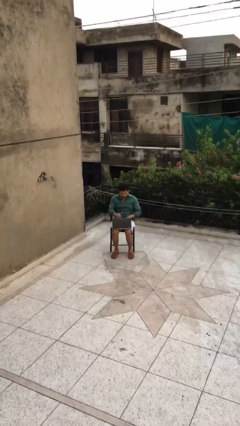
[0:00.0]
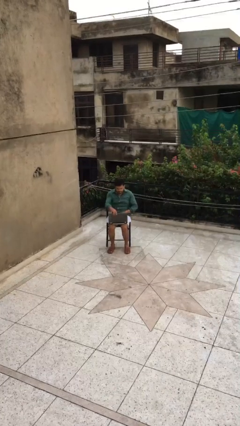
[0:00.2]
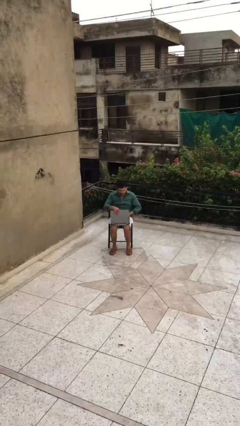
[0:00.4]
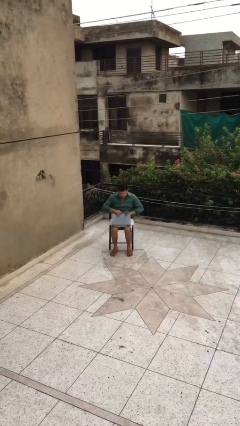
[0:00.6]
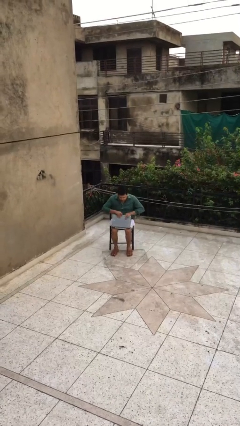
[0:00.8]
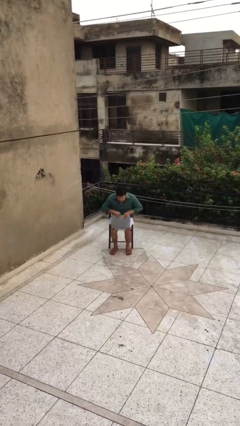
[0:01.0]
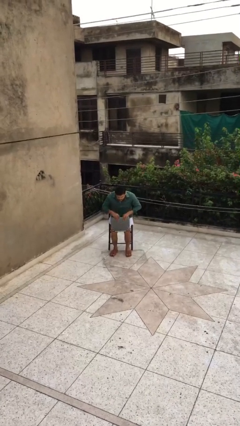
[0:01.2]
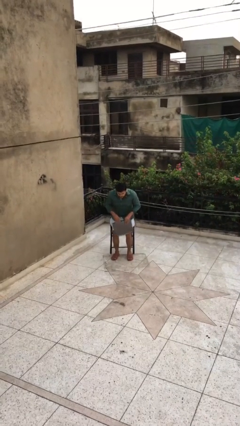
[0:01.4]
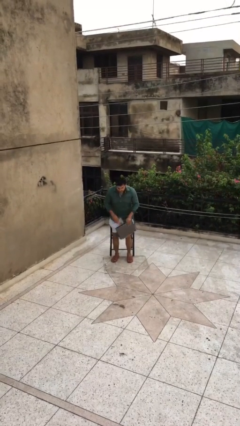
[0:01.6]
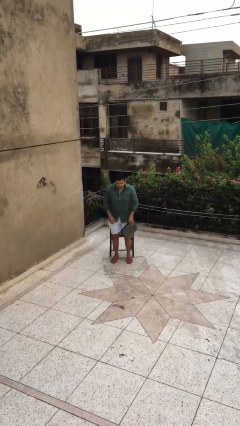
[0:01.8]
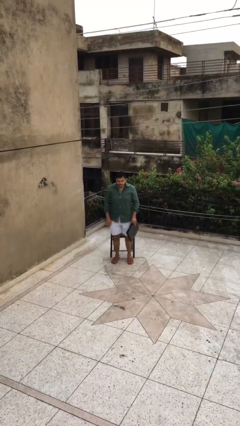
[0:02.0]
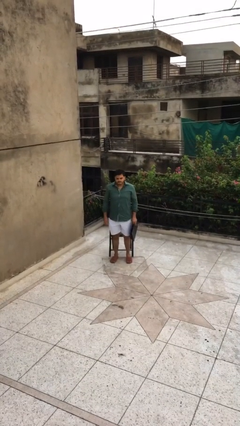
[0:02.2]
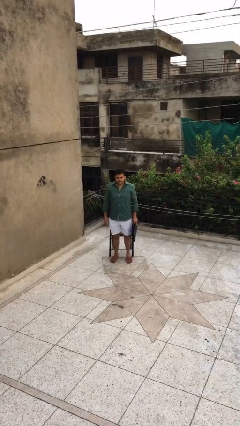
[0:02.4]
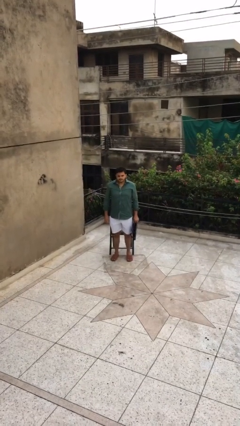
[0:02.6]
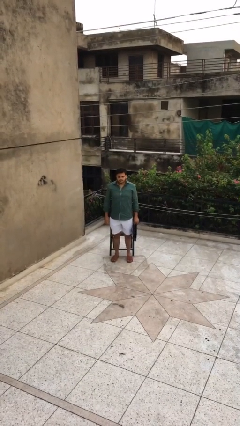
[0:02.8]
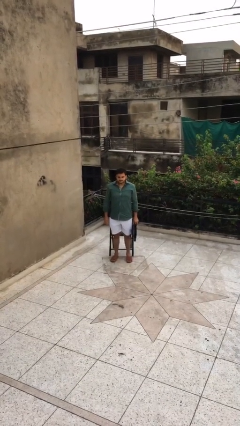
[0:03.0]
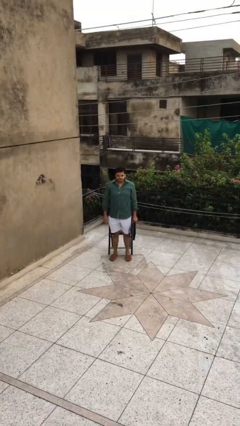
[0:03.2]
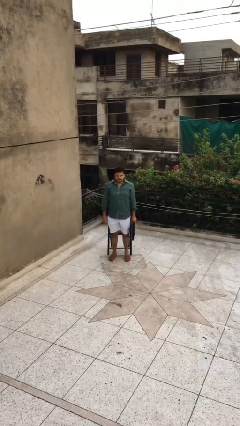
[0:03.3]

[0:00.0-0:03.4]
person stands up

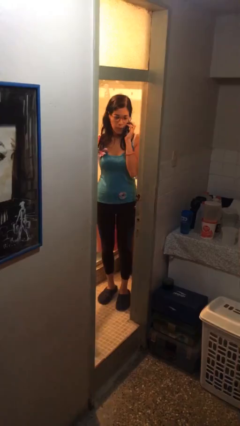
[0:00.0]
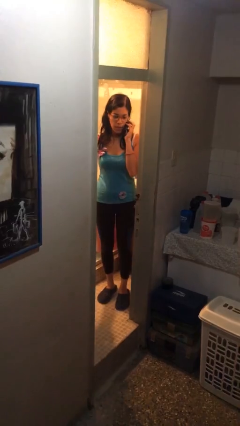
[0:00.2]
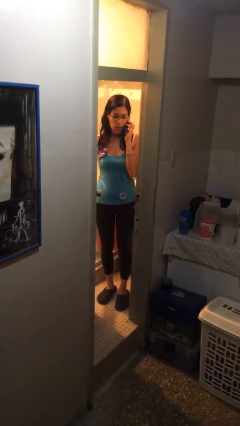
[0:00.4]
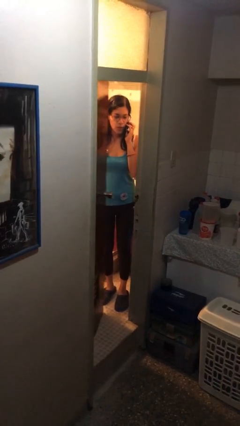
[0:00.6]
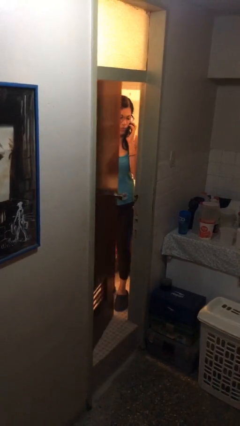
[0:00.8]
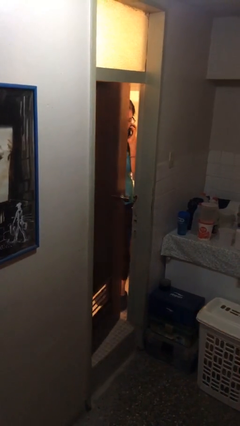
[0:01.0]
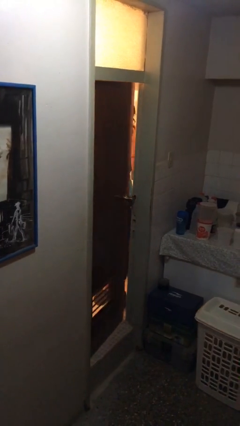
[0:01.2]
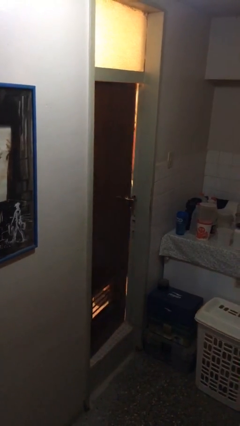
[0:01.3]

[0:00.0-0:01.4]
person closes facility door

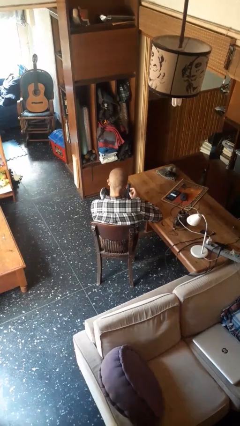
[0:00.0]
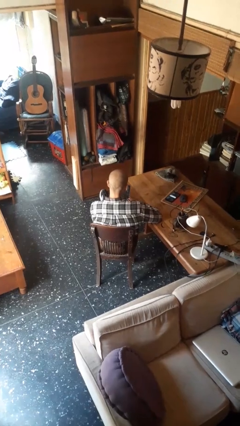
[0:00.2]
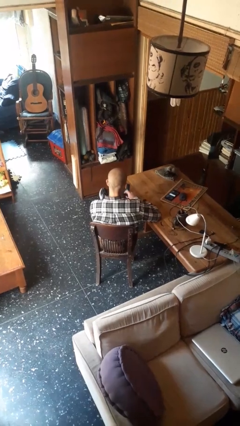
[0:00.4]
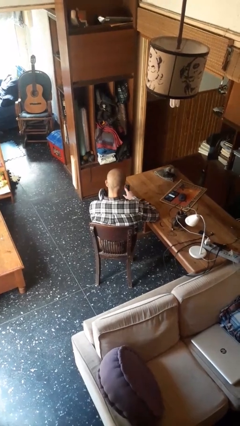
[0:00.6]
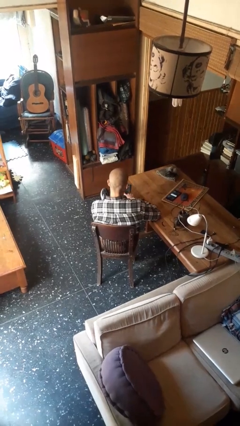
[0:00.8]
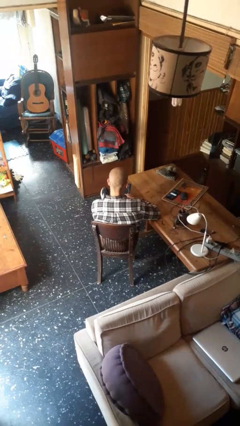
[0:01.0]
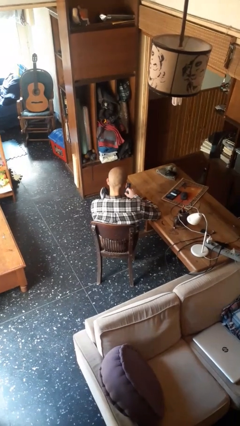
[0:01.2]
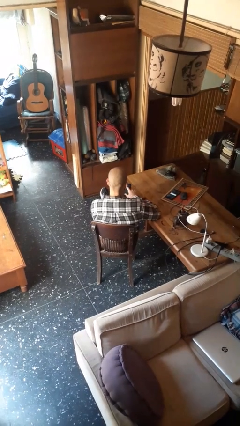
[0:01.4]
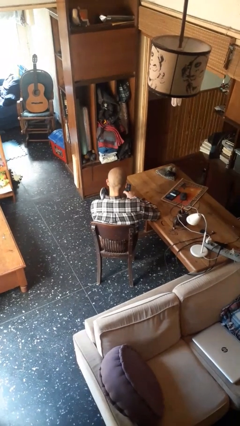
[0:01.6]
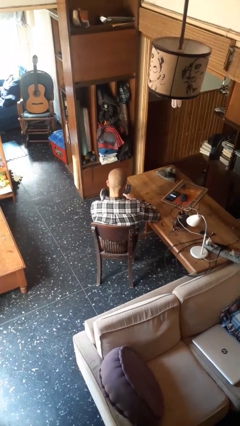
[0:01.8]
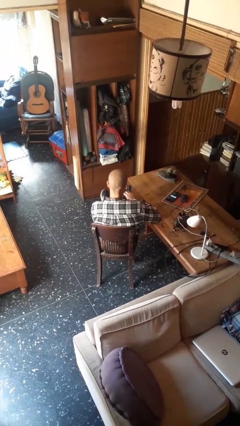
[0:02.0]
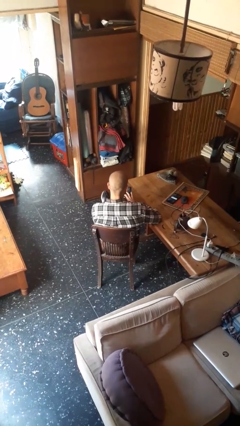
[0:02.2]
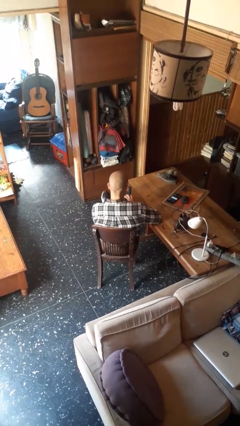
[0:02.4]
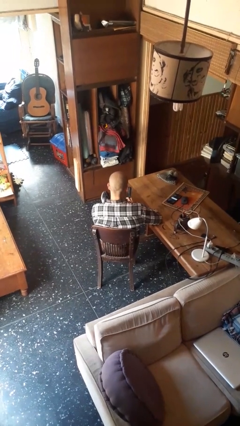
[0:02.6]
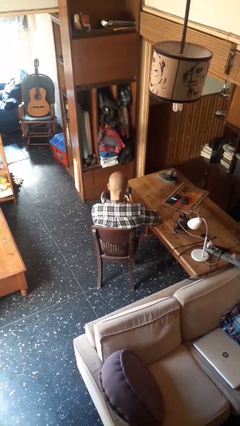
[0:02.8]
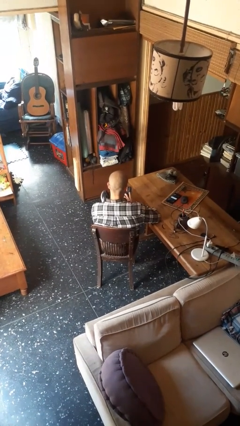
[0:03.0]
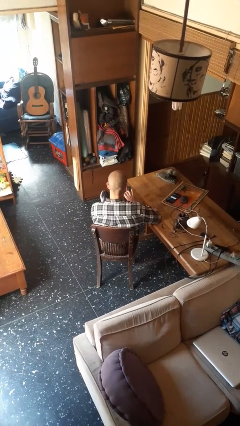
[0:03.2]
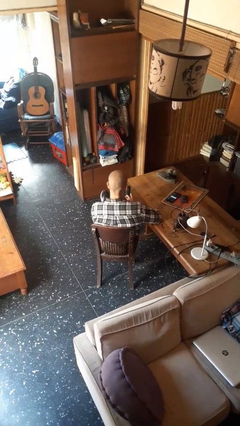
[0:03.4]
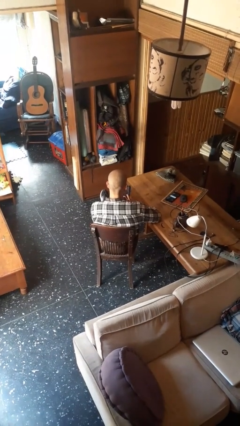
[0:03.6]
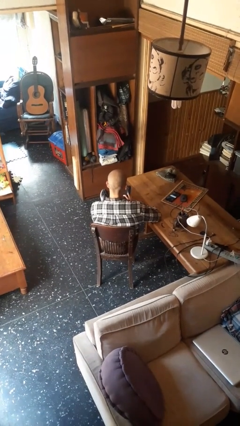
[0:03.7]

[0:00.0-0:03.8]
person interacts with tablet

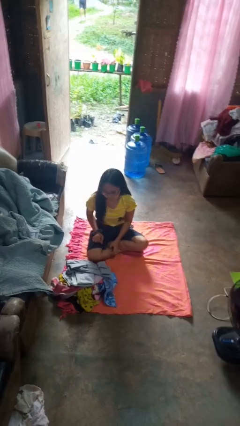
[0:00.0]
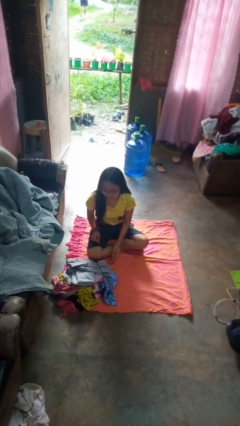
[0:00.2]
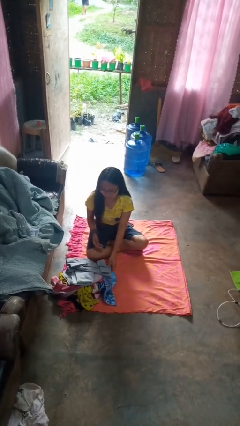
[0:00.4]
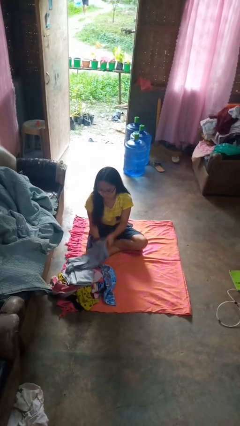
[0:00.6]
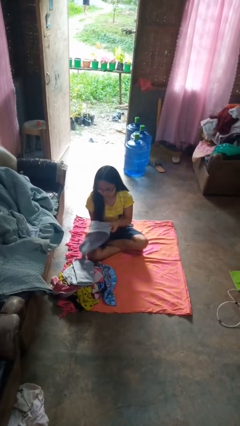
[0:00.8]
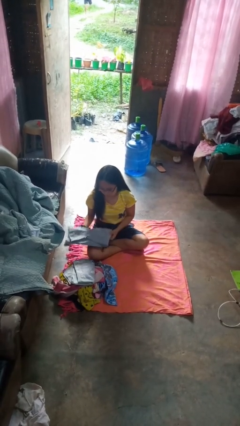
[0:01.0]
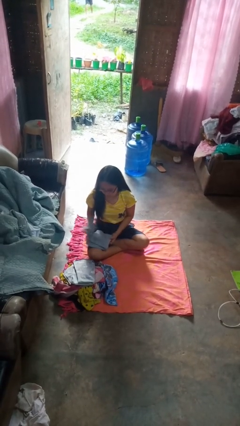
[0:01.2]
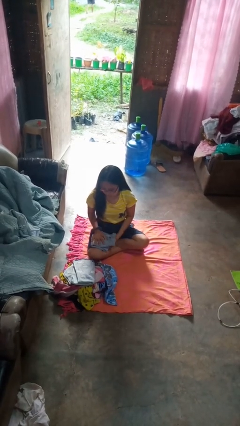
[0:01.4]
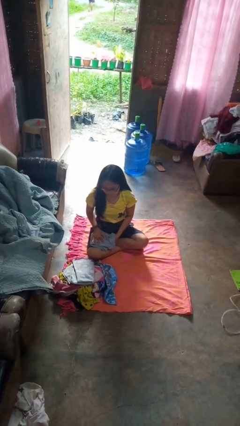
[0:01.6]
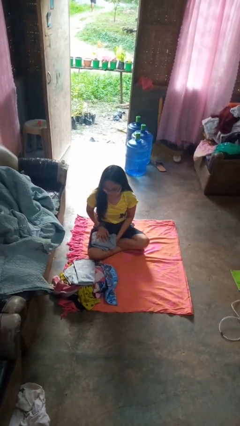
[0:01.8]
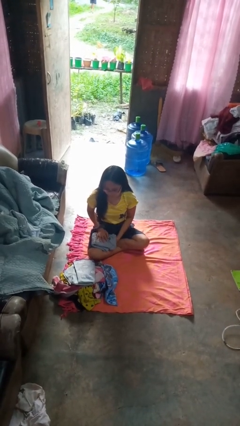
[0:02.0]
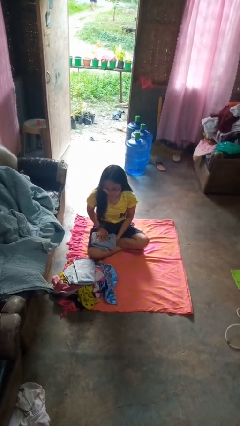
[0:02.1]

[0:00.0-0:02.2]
person folds shirt

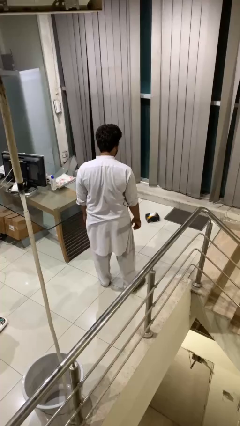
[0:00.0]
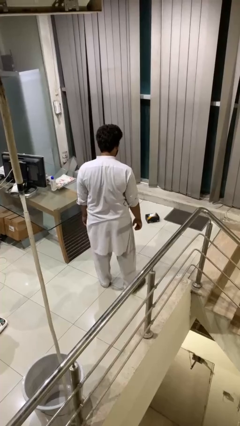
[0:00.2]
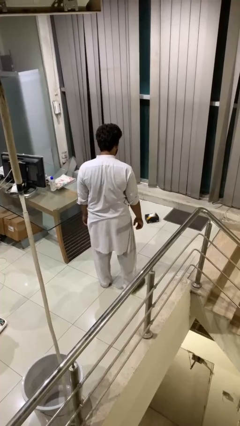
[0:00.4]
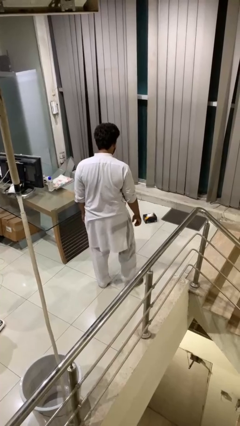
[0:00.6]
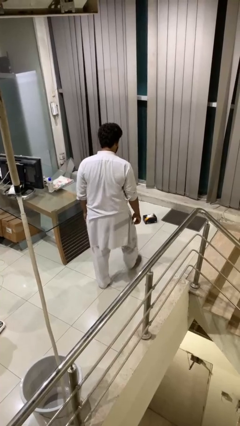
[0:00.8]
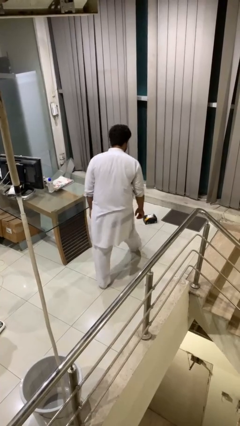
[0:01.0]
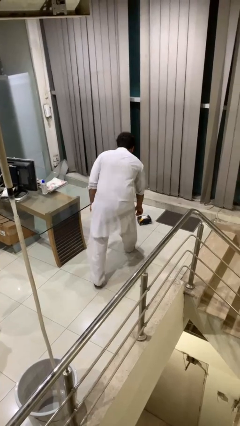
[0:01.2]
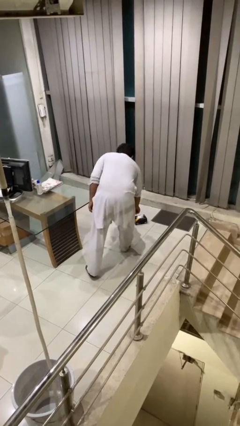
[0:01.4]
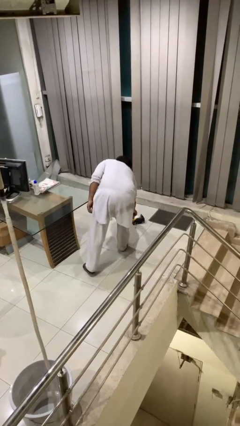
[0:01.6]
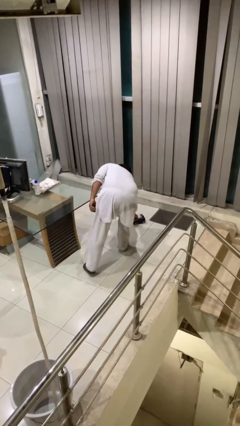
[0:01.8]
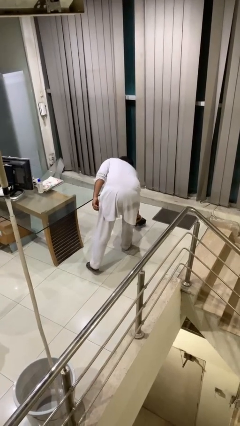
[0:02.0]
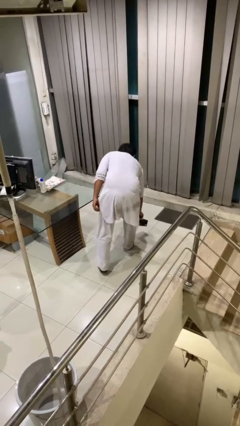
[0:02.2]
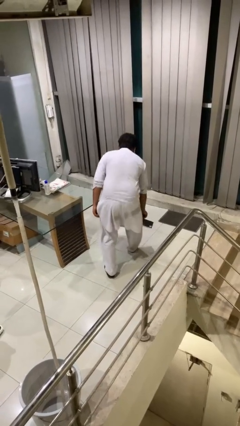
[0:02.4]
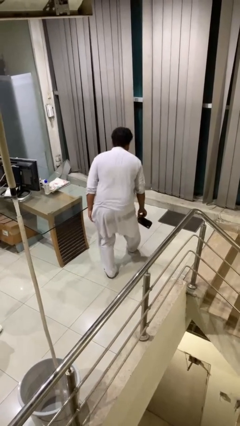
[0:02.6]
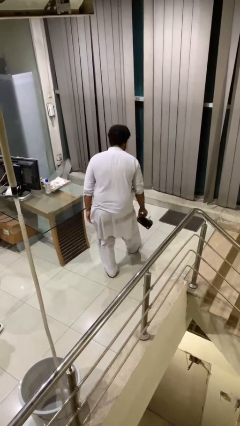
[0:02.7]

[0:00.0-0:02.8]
person picks up object from floor

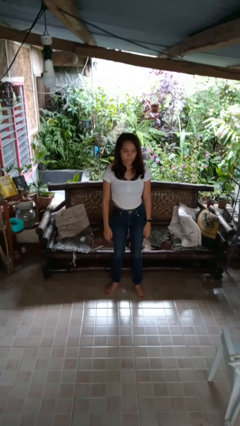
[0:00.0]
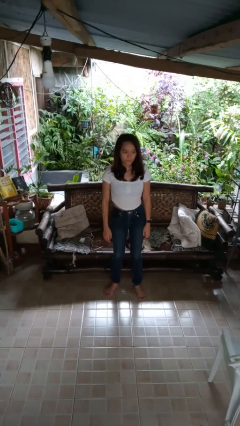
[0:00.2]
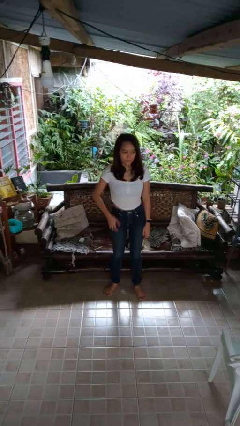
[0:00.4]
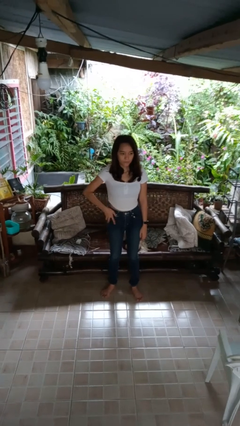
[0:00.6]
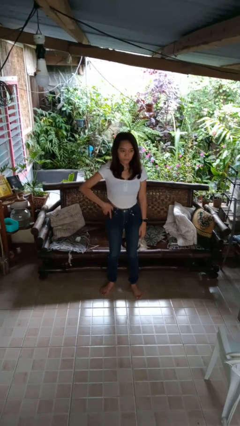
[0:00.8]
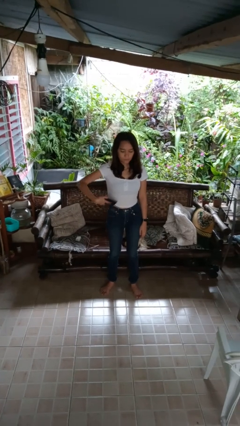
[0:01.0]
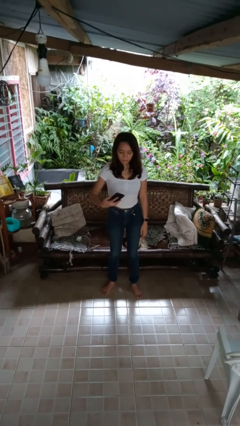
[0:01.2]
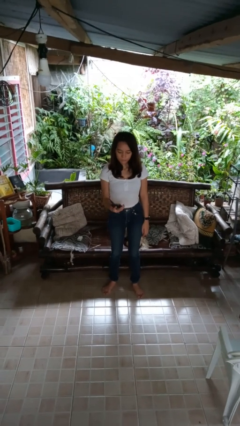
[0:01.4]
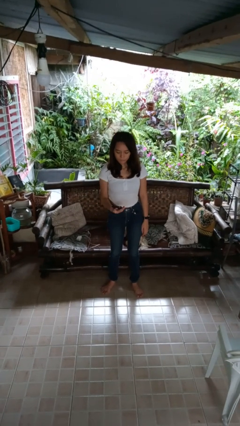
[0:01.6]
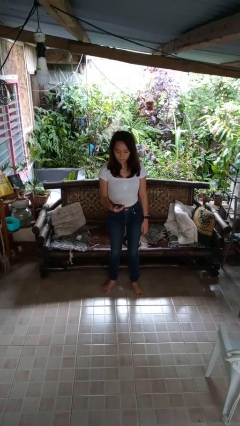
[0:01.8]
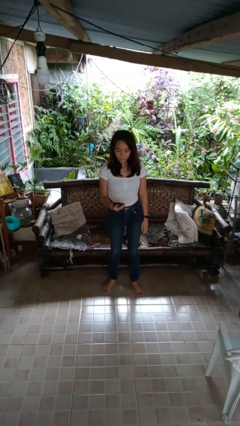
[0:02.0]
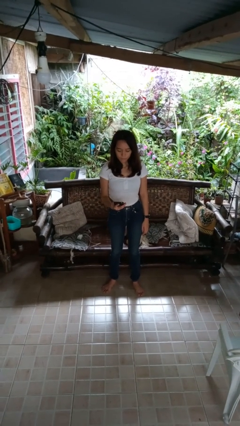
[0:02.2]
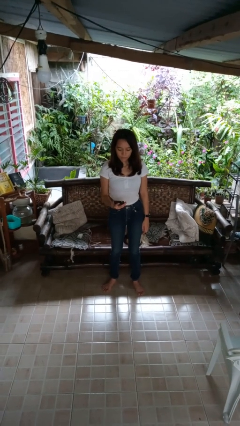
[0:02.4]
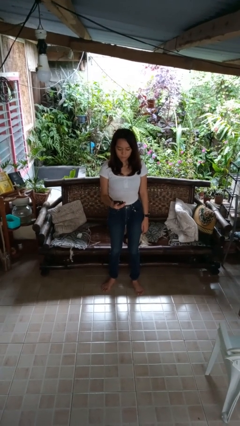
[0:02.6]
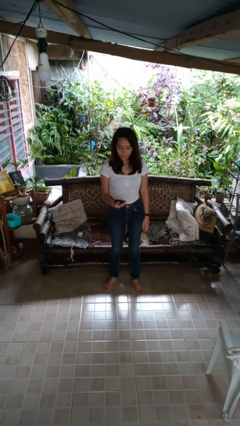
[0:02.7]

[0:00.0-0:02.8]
person takes phone from pocket

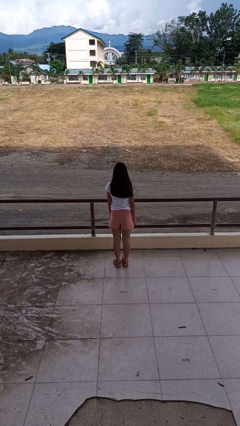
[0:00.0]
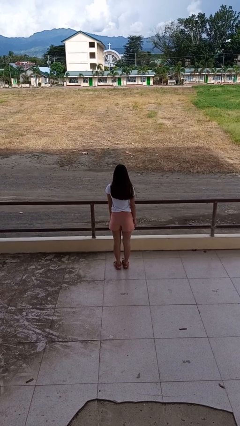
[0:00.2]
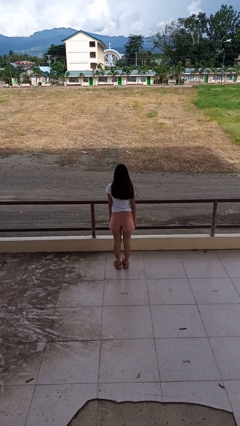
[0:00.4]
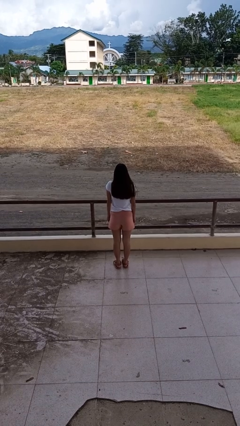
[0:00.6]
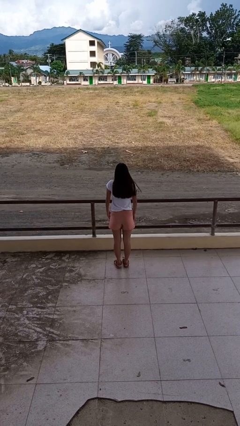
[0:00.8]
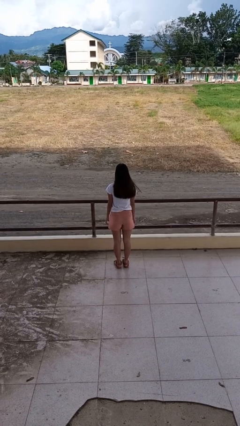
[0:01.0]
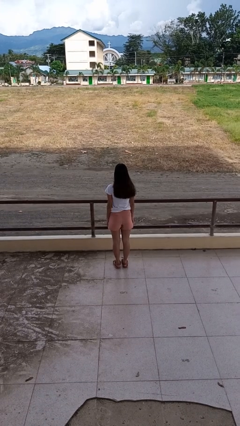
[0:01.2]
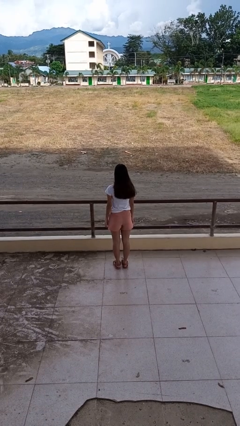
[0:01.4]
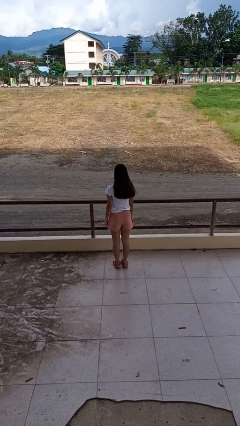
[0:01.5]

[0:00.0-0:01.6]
person shrugs
